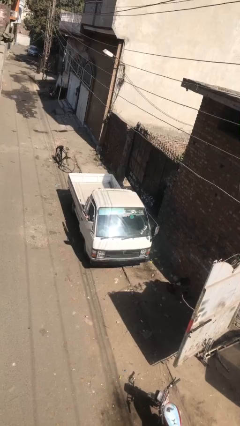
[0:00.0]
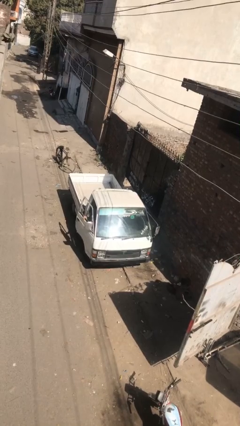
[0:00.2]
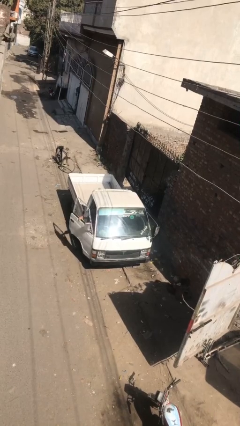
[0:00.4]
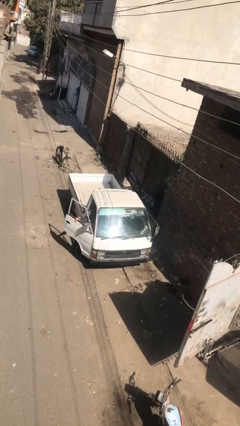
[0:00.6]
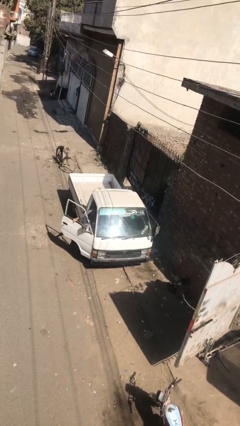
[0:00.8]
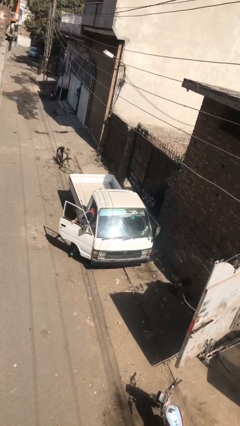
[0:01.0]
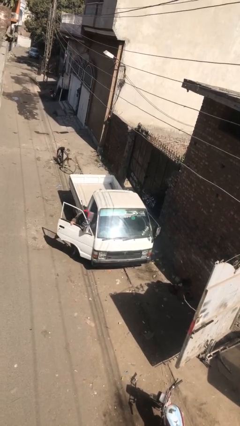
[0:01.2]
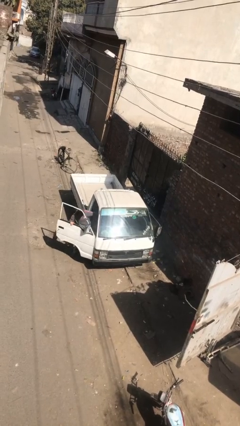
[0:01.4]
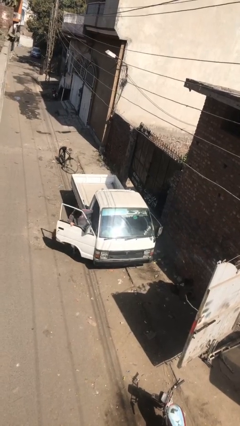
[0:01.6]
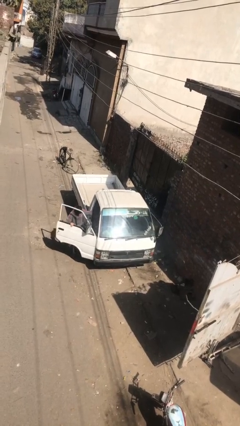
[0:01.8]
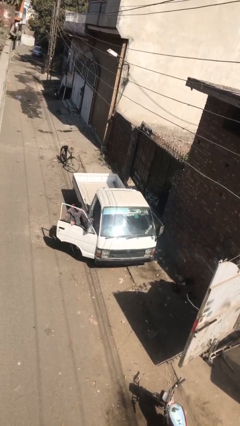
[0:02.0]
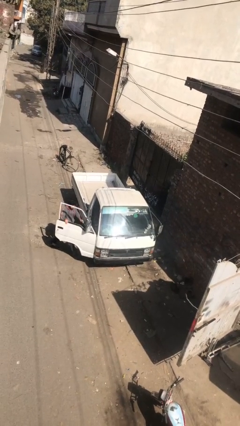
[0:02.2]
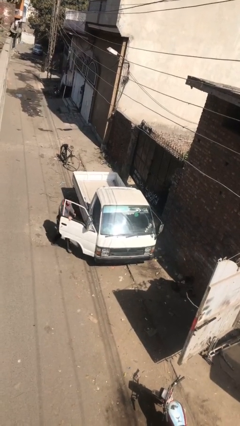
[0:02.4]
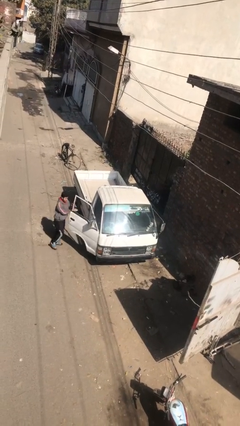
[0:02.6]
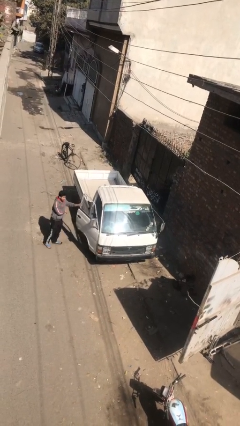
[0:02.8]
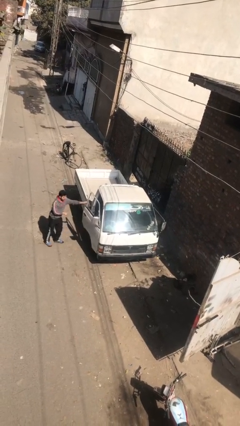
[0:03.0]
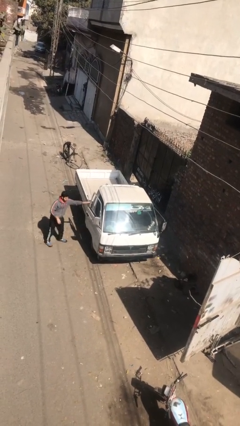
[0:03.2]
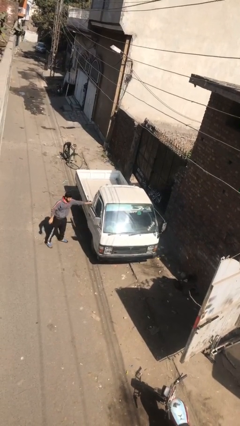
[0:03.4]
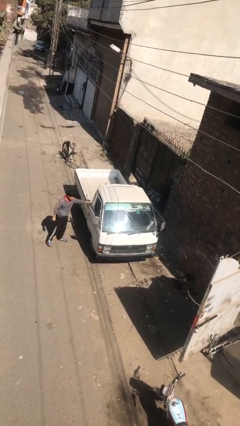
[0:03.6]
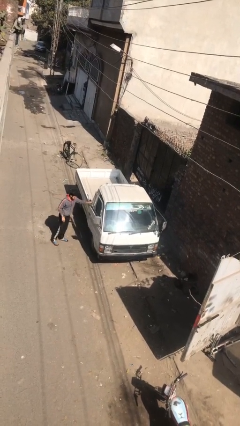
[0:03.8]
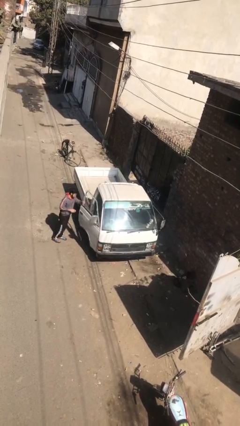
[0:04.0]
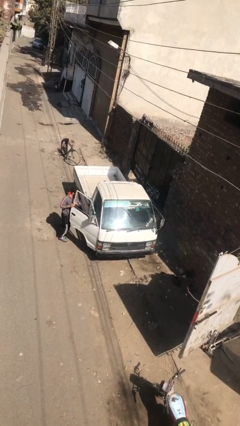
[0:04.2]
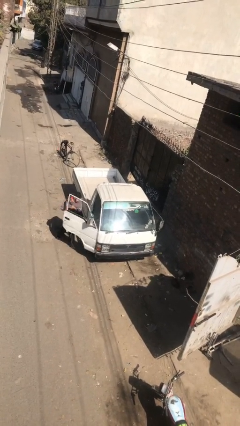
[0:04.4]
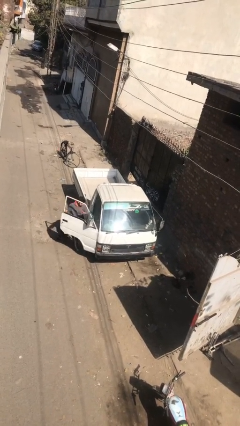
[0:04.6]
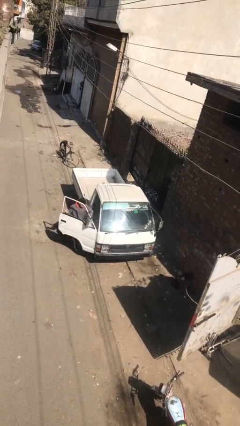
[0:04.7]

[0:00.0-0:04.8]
car drops off person

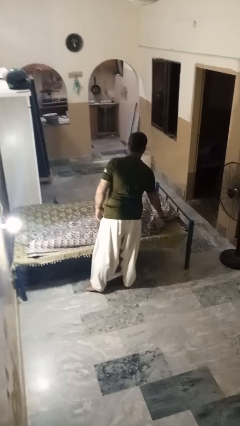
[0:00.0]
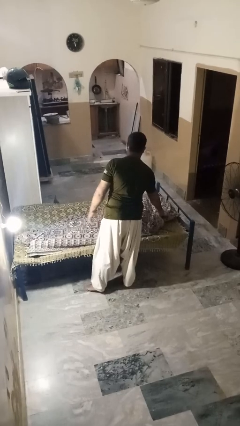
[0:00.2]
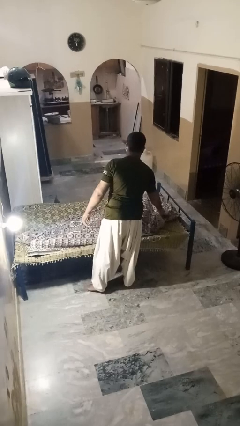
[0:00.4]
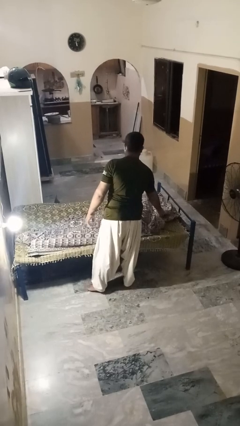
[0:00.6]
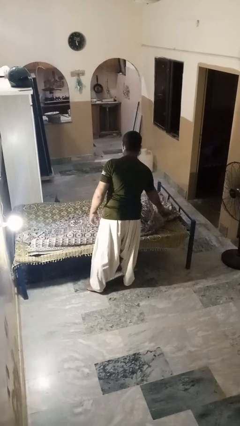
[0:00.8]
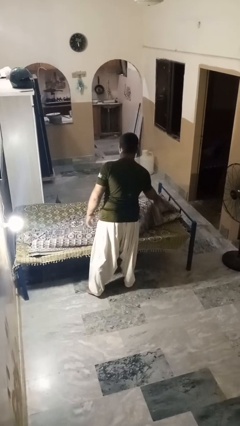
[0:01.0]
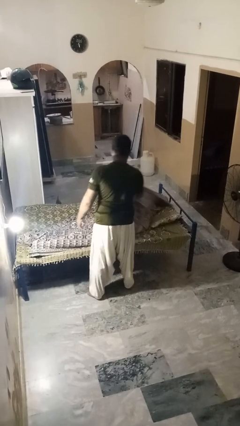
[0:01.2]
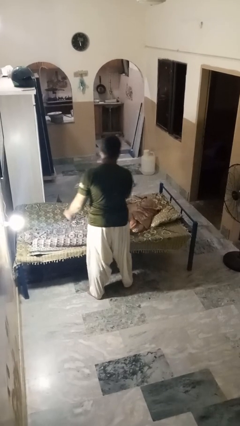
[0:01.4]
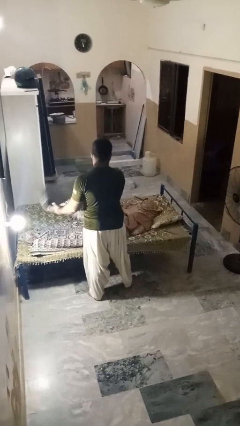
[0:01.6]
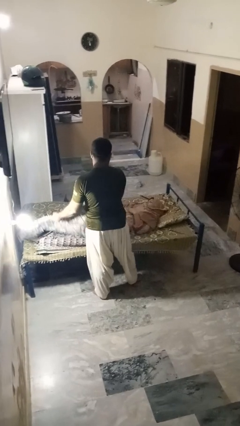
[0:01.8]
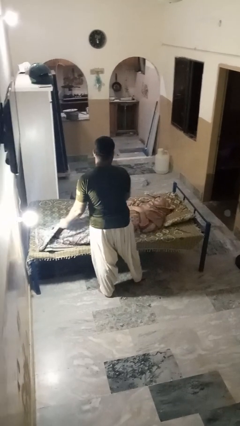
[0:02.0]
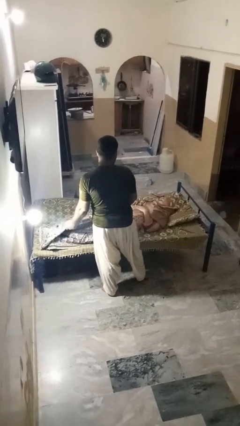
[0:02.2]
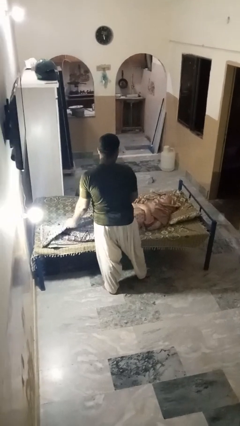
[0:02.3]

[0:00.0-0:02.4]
person uncovers friend with blanket

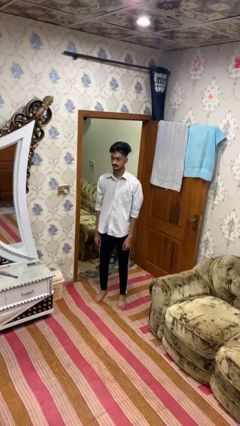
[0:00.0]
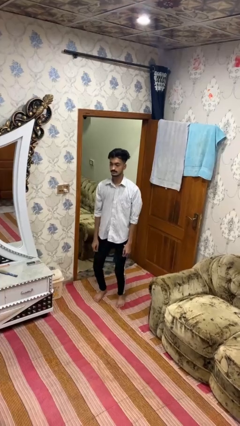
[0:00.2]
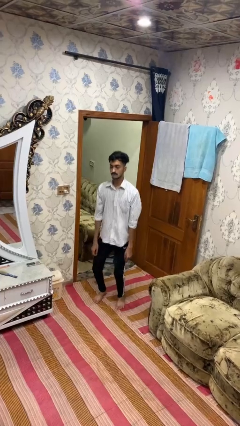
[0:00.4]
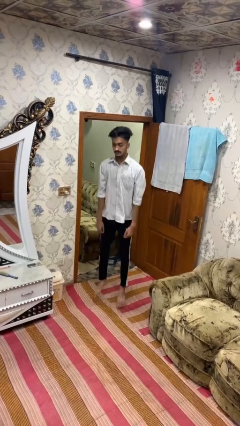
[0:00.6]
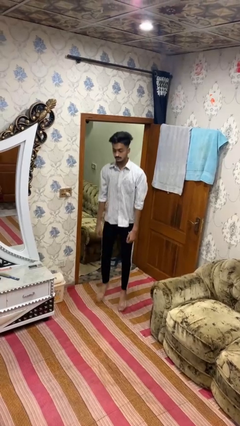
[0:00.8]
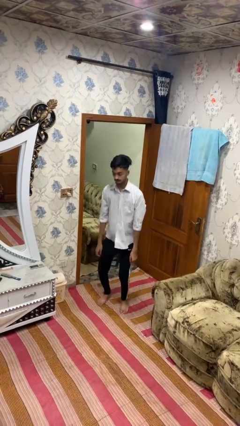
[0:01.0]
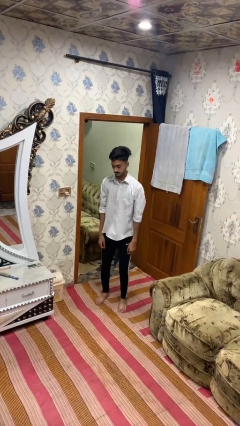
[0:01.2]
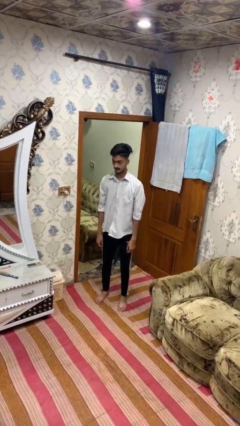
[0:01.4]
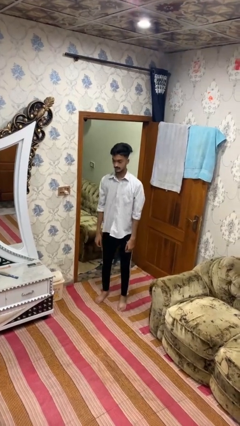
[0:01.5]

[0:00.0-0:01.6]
person jumps

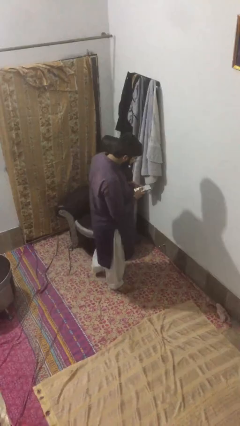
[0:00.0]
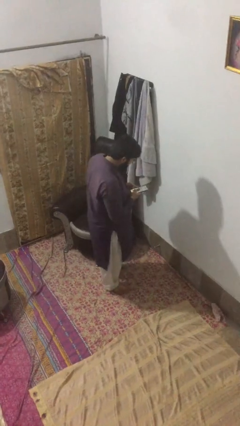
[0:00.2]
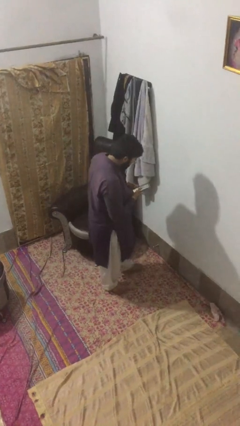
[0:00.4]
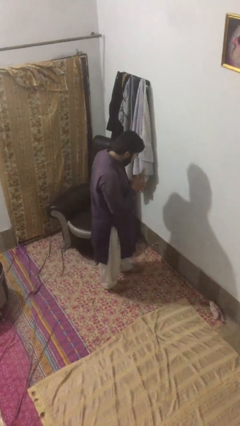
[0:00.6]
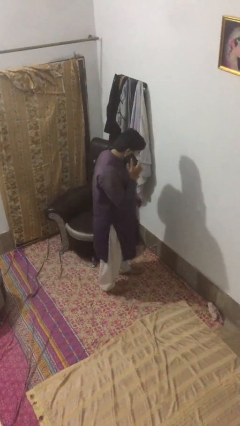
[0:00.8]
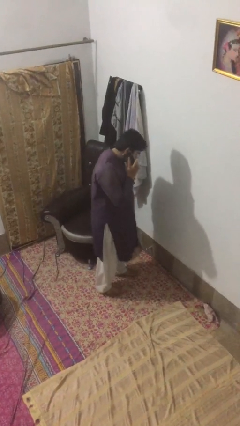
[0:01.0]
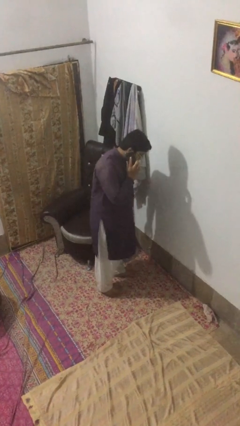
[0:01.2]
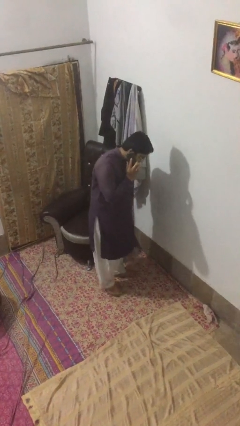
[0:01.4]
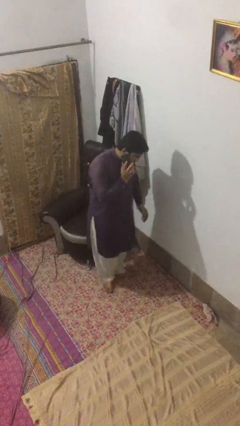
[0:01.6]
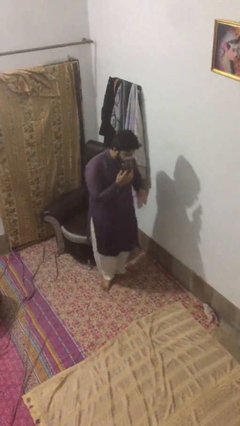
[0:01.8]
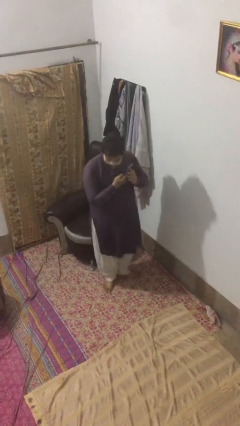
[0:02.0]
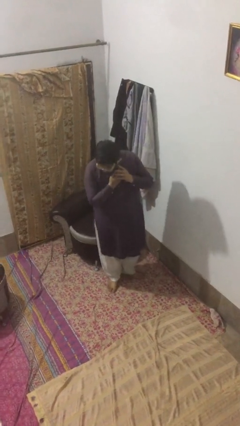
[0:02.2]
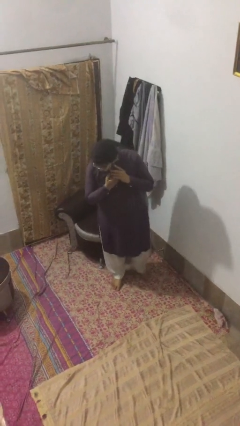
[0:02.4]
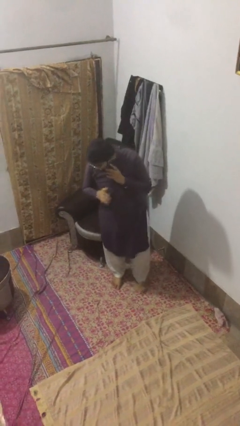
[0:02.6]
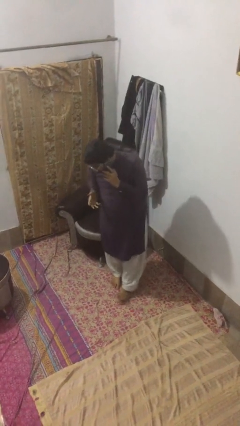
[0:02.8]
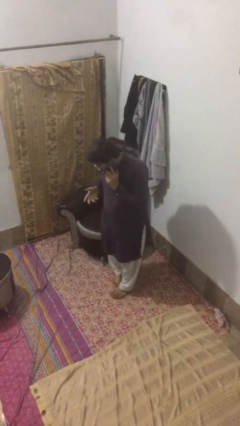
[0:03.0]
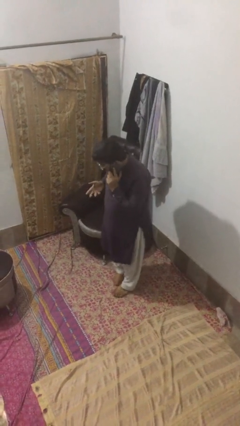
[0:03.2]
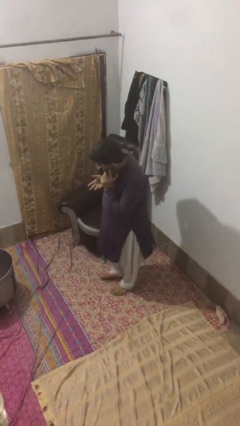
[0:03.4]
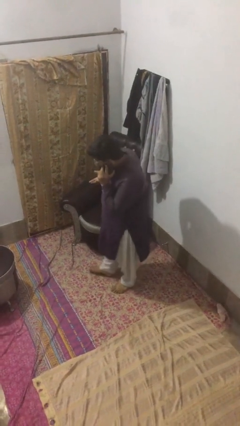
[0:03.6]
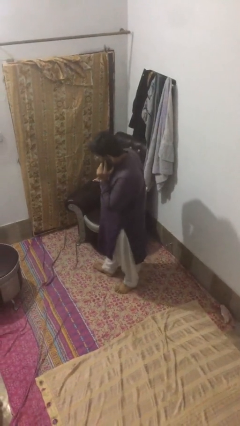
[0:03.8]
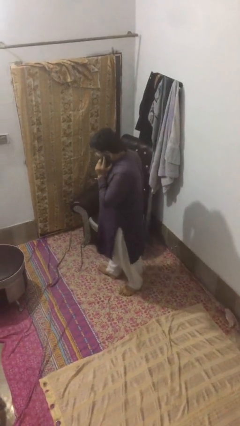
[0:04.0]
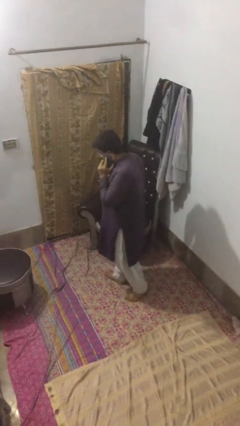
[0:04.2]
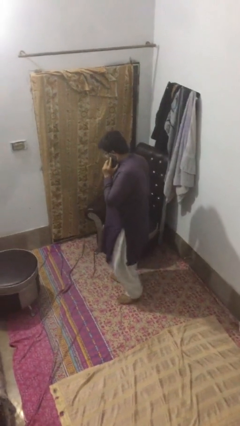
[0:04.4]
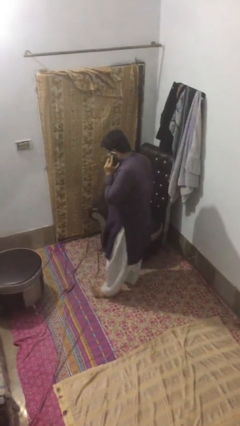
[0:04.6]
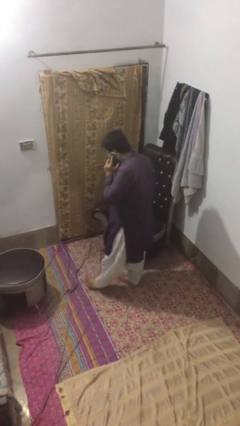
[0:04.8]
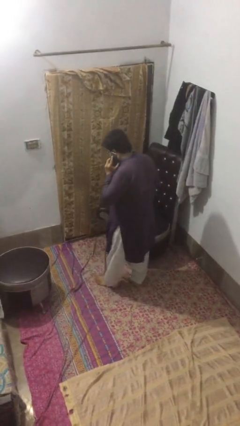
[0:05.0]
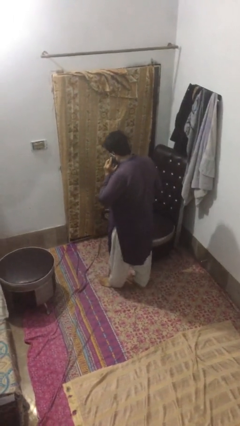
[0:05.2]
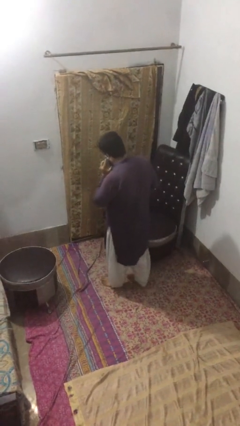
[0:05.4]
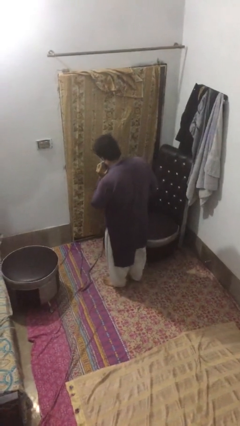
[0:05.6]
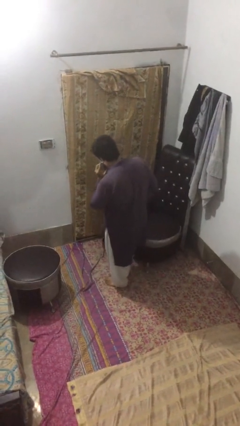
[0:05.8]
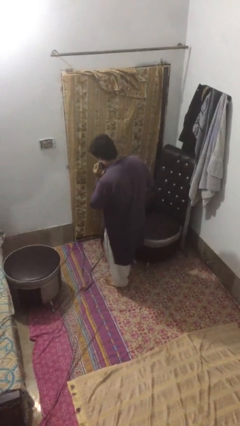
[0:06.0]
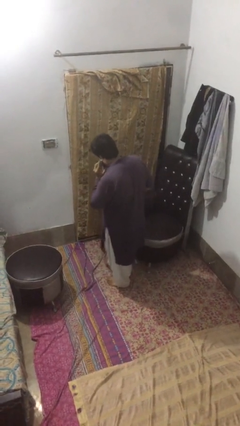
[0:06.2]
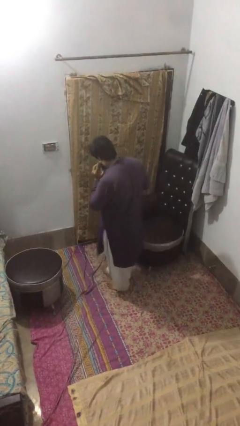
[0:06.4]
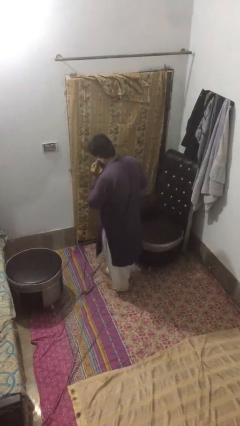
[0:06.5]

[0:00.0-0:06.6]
person talks on phone

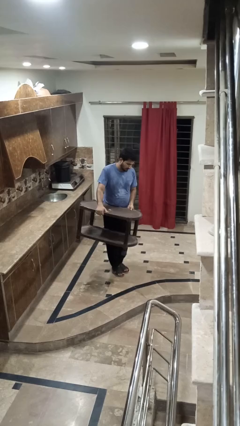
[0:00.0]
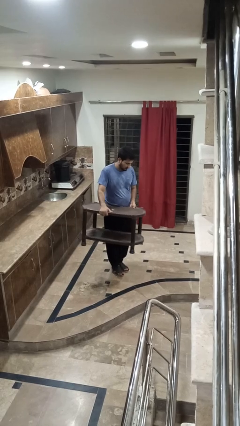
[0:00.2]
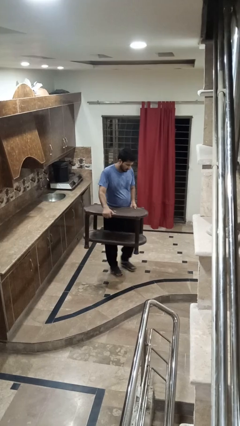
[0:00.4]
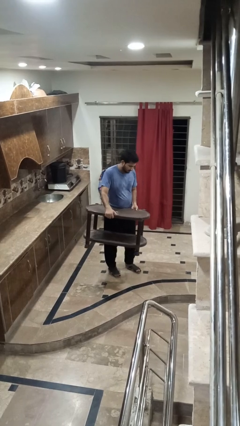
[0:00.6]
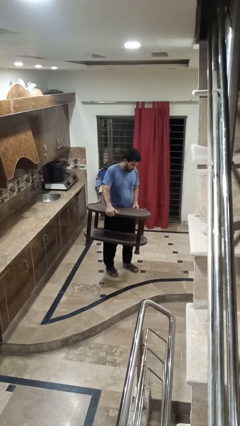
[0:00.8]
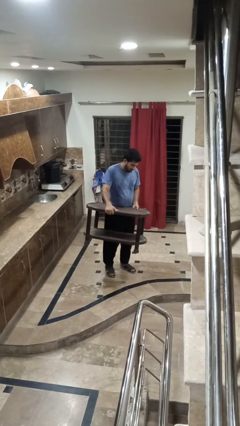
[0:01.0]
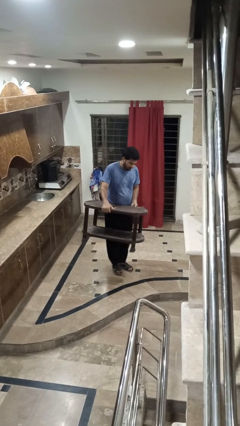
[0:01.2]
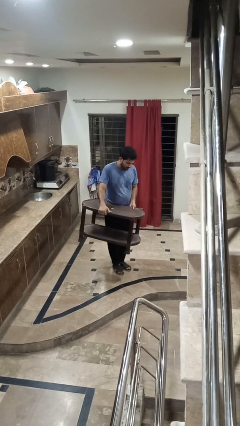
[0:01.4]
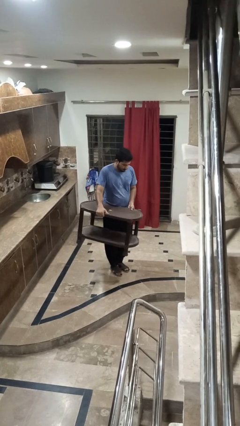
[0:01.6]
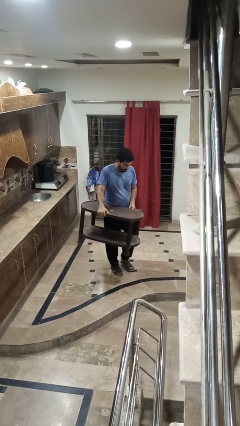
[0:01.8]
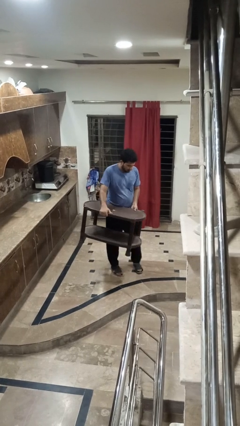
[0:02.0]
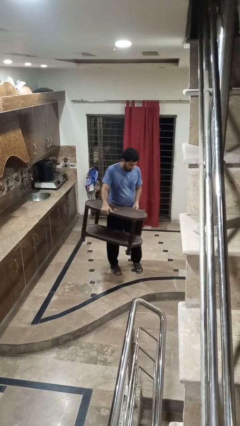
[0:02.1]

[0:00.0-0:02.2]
person carries furniture

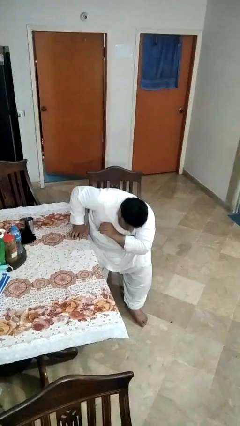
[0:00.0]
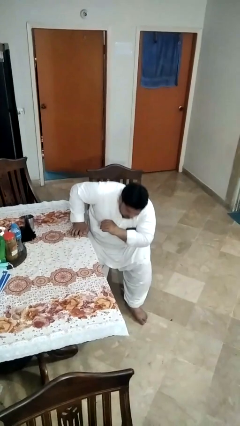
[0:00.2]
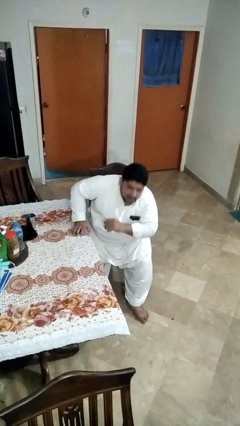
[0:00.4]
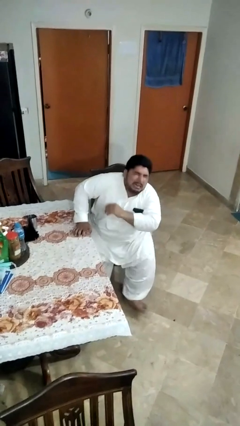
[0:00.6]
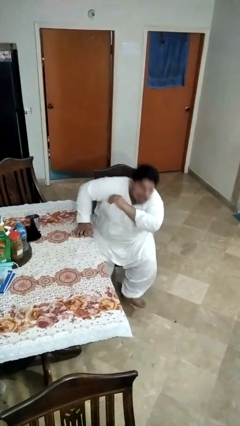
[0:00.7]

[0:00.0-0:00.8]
person sneezes into arm
